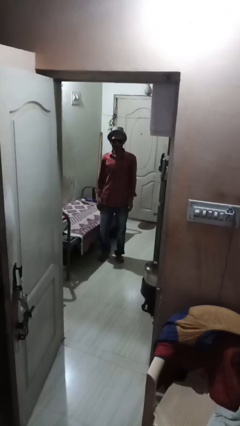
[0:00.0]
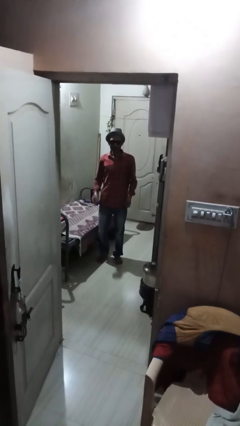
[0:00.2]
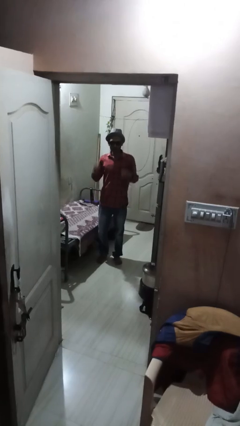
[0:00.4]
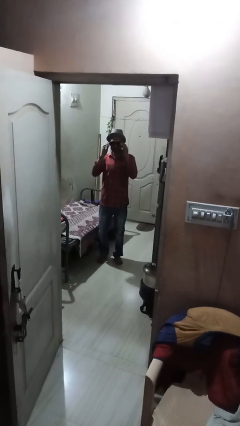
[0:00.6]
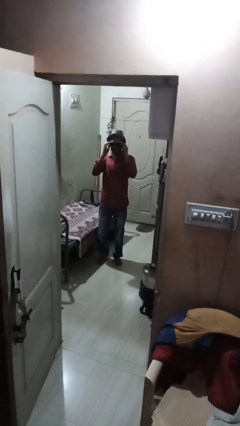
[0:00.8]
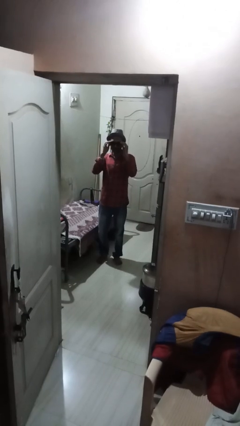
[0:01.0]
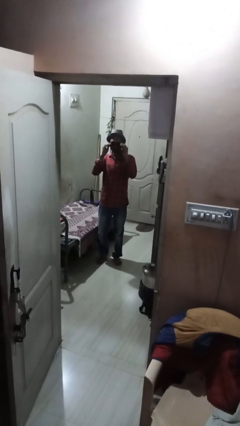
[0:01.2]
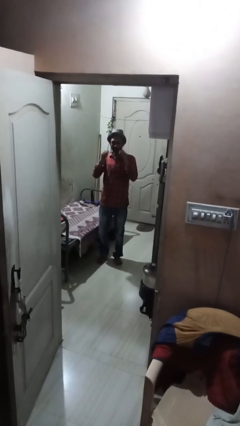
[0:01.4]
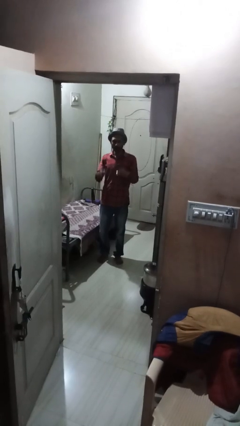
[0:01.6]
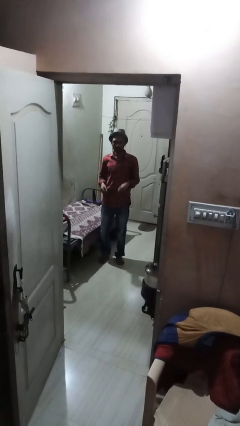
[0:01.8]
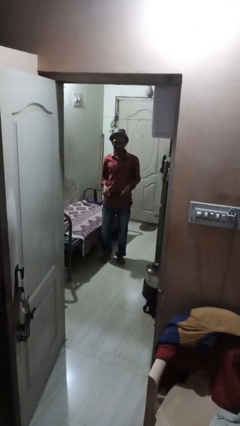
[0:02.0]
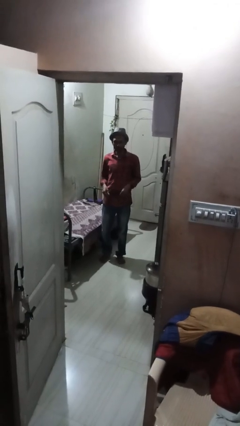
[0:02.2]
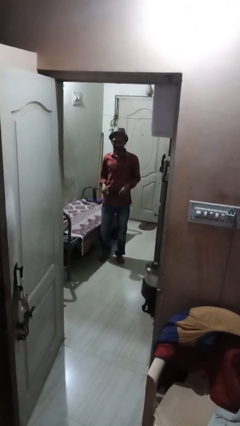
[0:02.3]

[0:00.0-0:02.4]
person takes off sunglasses

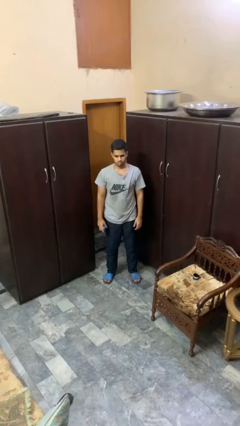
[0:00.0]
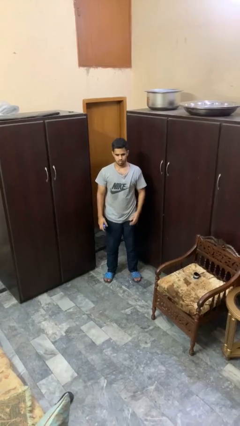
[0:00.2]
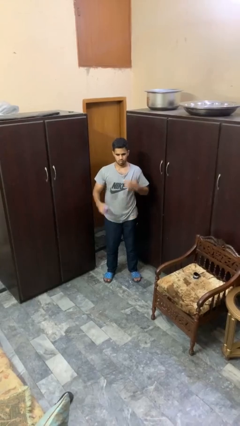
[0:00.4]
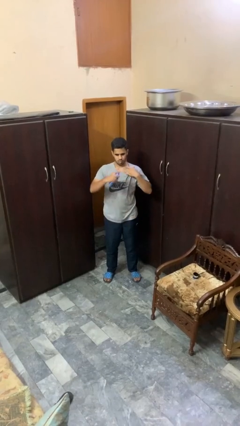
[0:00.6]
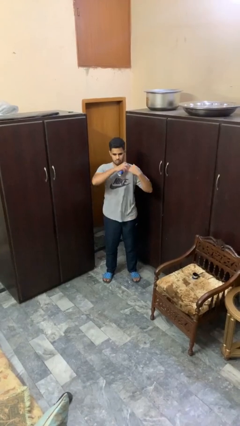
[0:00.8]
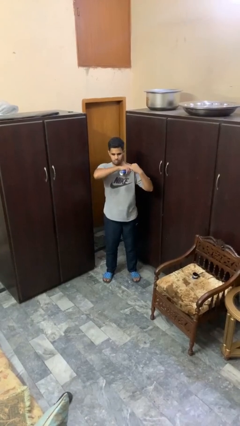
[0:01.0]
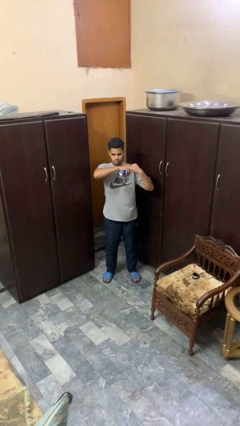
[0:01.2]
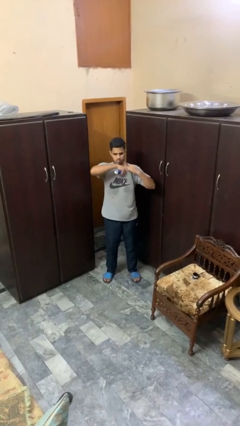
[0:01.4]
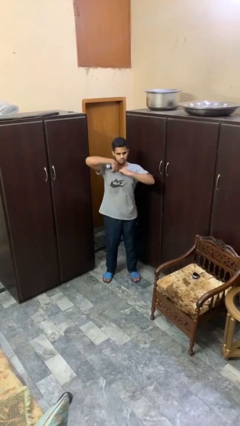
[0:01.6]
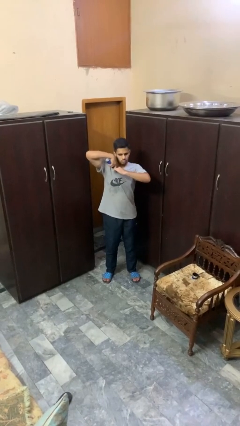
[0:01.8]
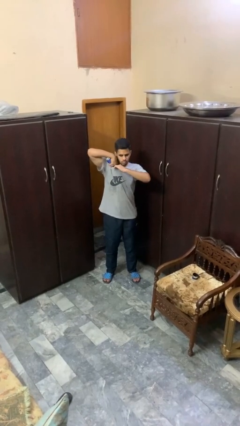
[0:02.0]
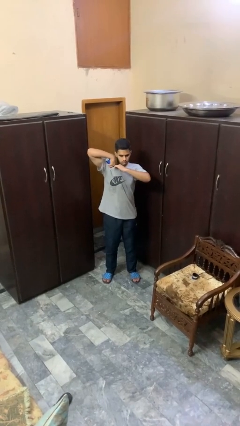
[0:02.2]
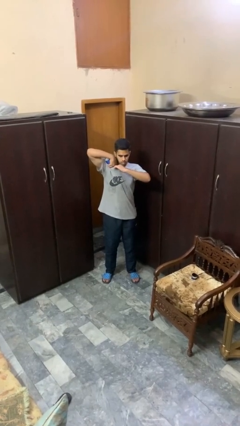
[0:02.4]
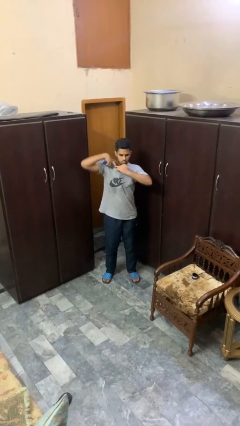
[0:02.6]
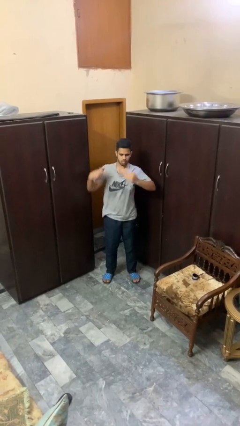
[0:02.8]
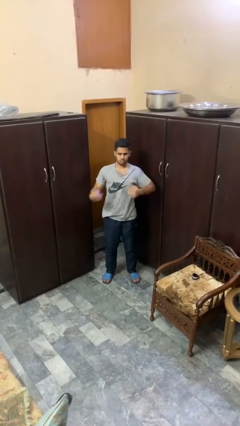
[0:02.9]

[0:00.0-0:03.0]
person applies deodorant

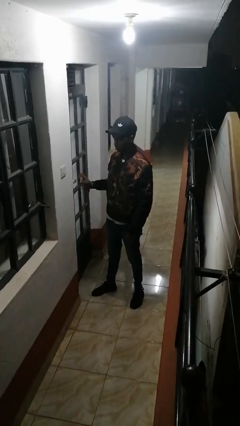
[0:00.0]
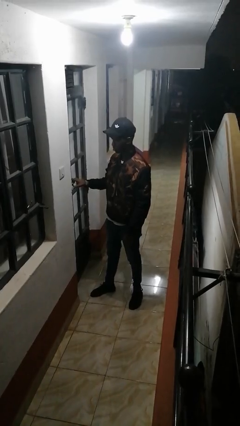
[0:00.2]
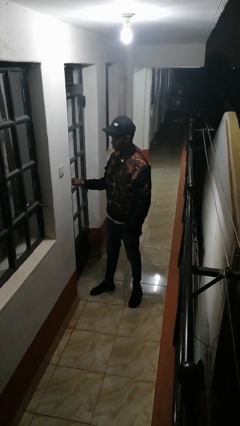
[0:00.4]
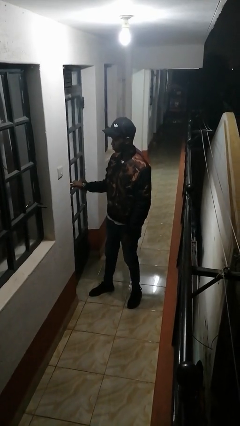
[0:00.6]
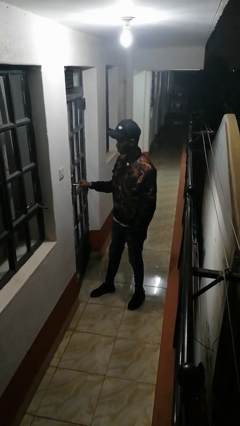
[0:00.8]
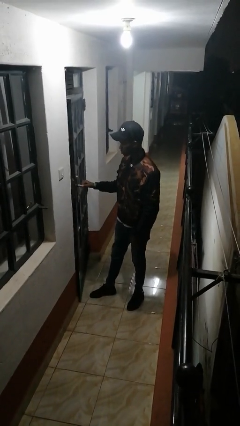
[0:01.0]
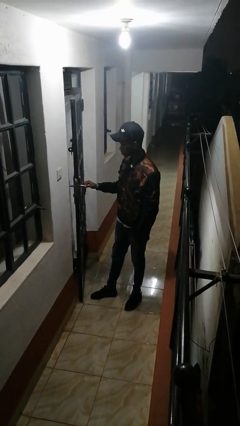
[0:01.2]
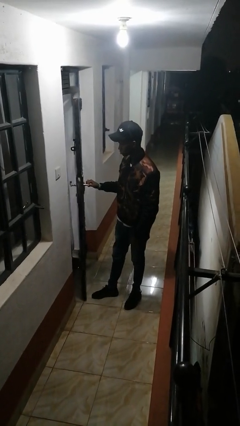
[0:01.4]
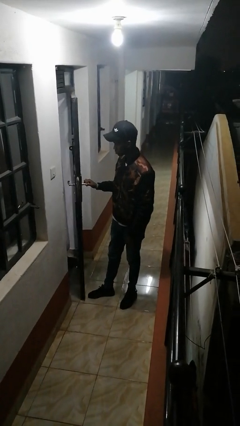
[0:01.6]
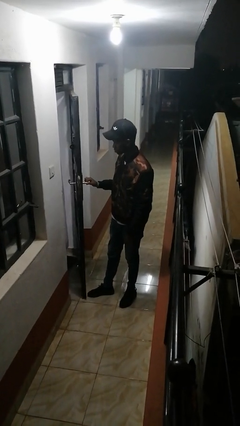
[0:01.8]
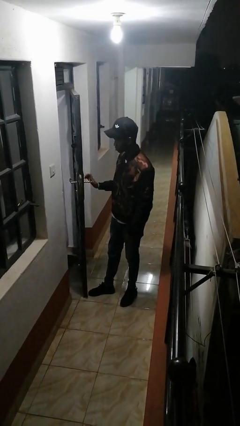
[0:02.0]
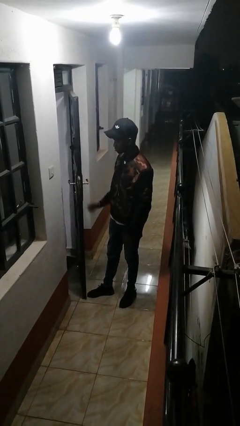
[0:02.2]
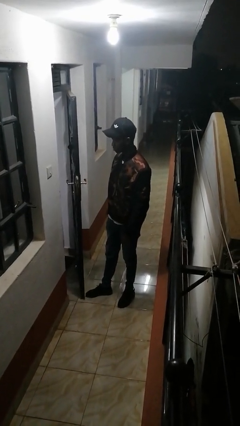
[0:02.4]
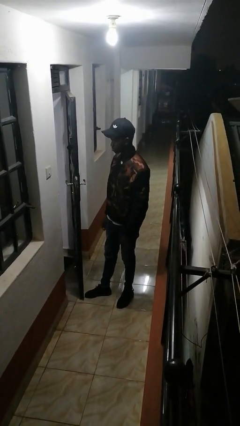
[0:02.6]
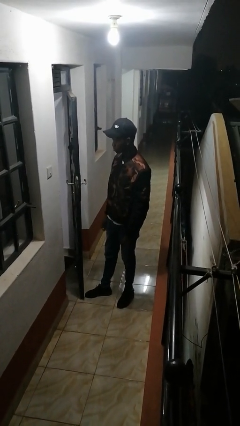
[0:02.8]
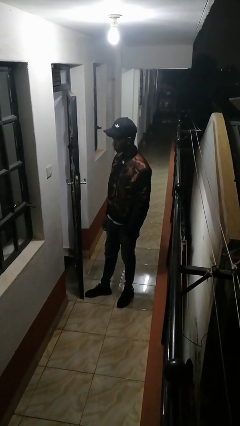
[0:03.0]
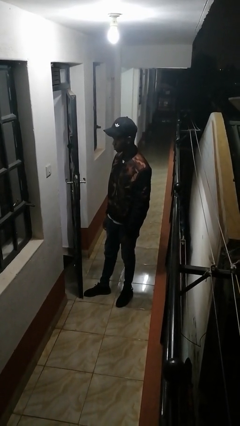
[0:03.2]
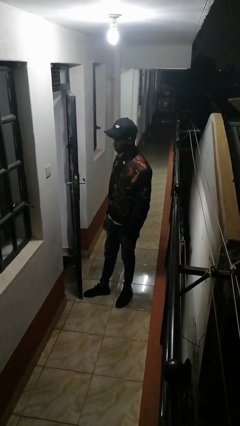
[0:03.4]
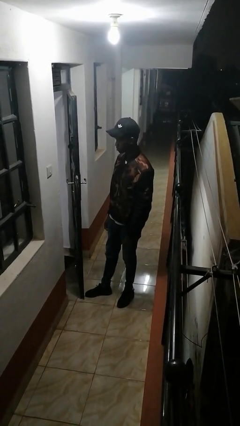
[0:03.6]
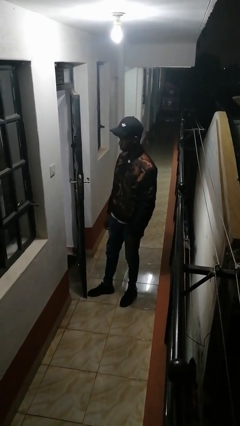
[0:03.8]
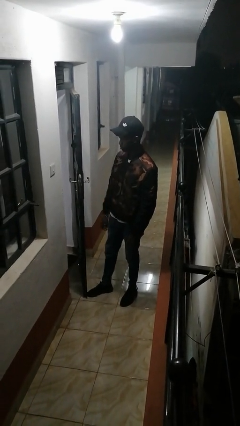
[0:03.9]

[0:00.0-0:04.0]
person opens facility door

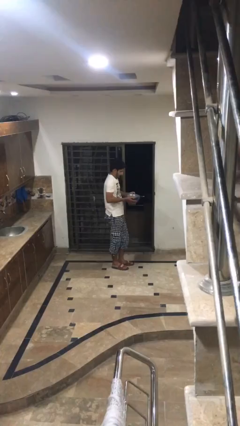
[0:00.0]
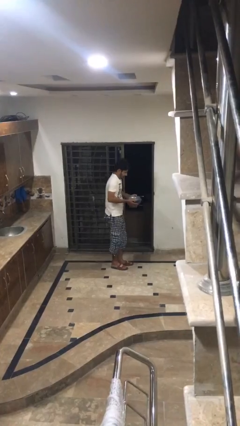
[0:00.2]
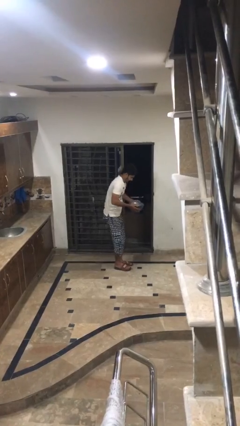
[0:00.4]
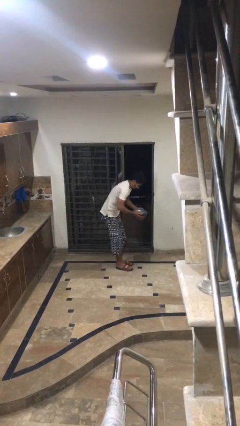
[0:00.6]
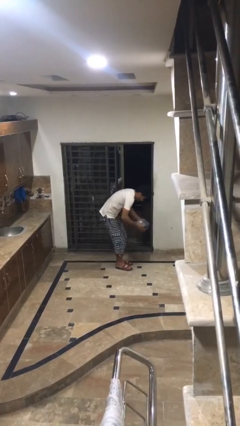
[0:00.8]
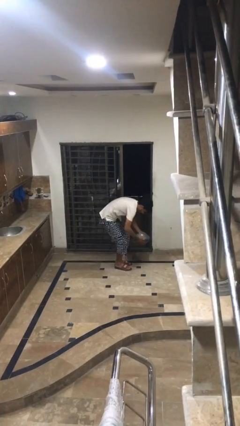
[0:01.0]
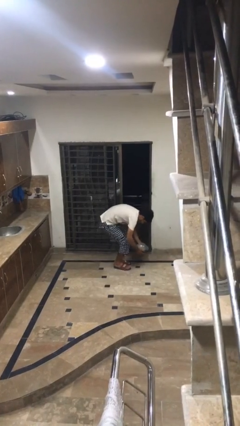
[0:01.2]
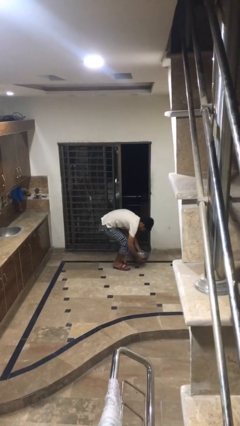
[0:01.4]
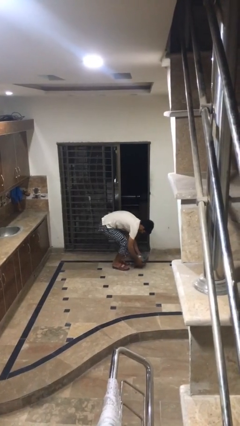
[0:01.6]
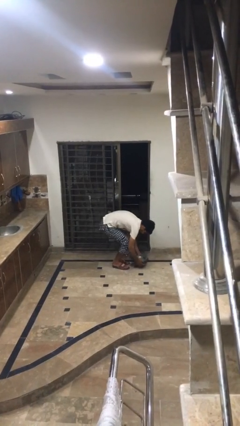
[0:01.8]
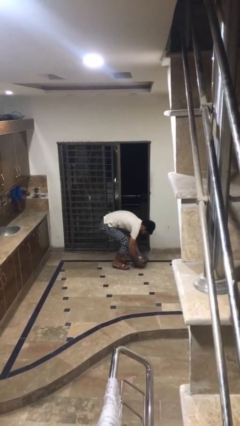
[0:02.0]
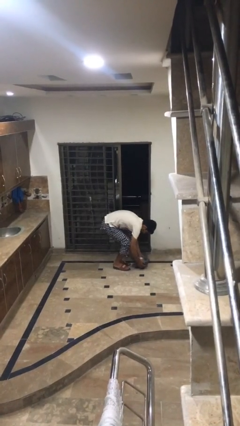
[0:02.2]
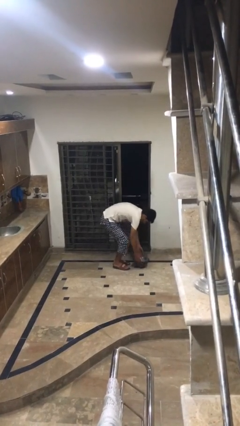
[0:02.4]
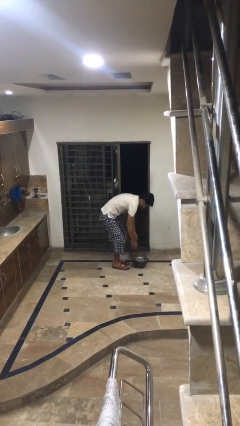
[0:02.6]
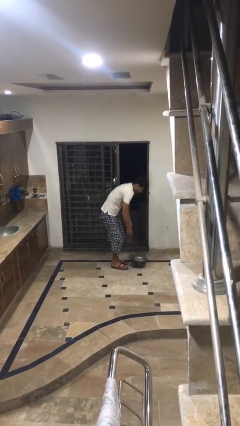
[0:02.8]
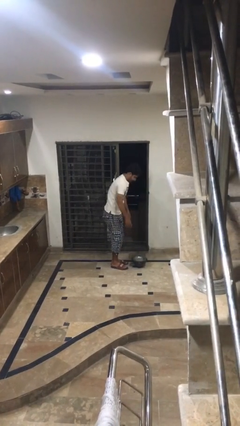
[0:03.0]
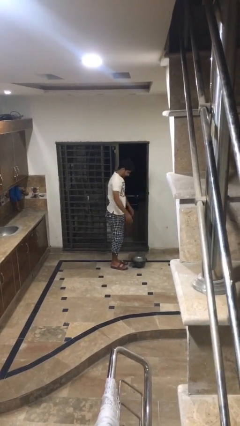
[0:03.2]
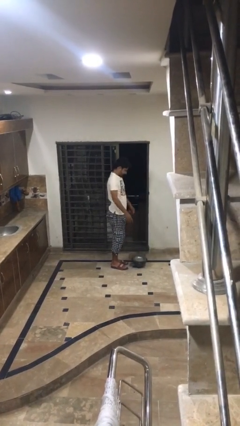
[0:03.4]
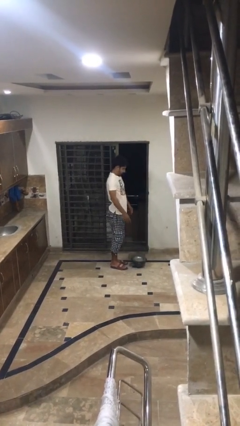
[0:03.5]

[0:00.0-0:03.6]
person puts down object on floor

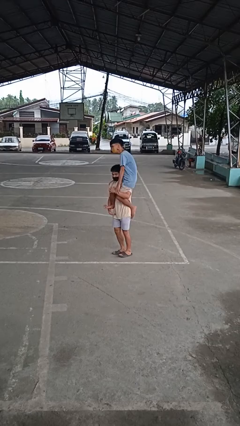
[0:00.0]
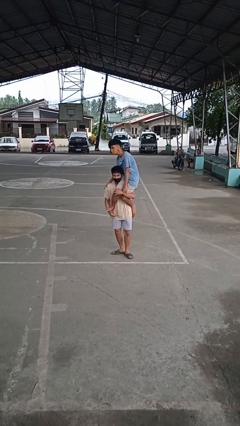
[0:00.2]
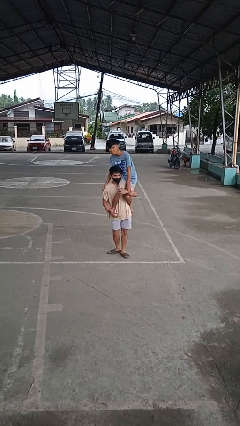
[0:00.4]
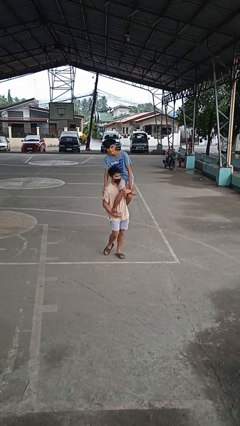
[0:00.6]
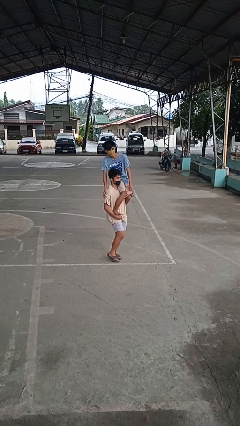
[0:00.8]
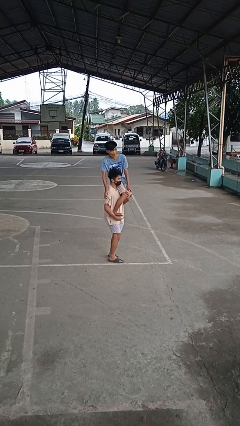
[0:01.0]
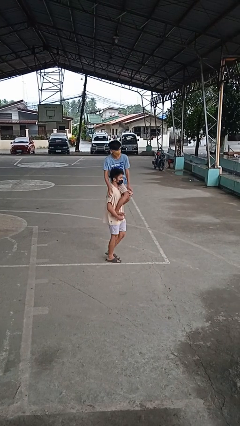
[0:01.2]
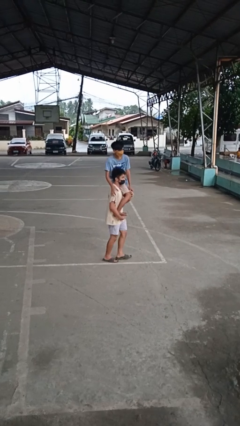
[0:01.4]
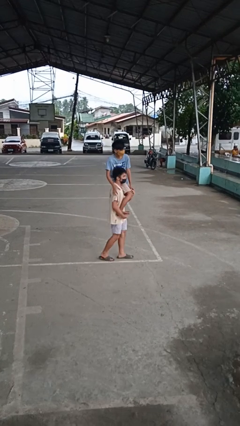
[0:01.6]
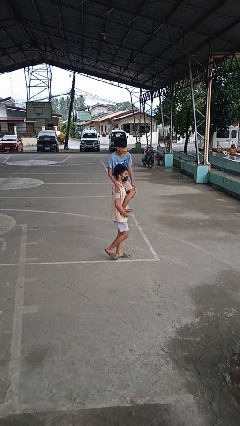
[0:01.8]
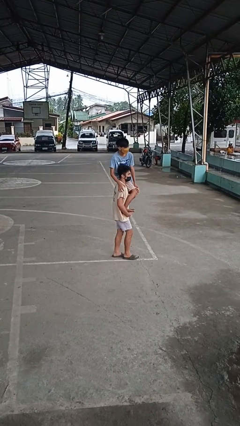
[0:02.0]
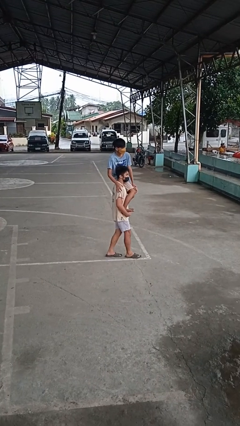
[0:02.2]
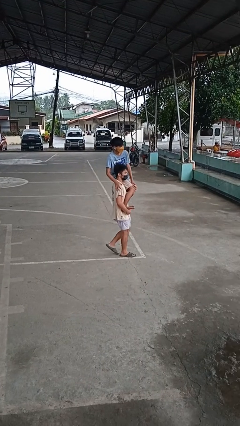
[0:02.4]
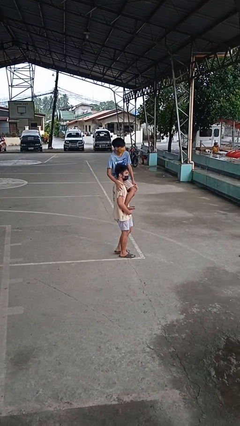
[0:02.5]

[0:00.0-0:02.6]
person carries person on shoulders

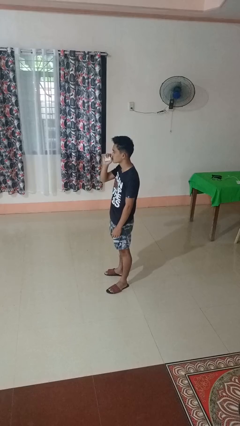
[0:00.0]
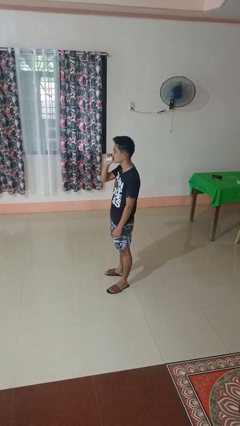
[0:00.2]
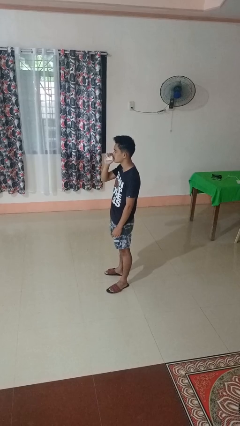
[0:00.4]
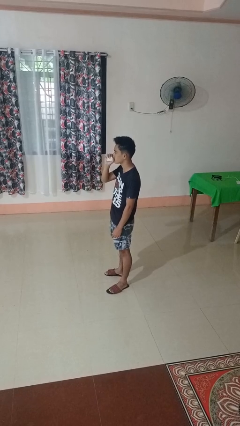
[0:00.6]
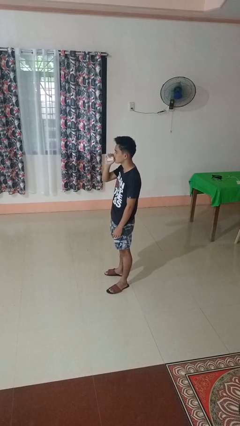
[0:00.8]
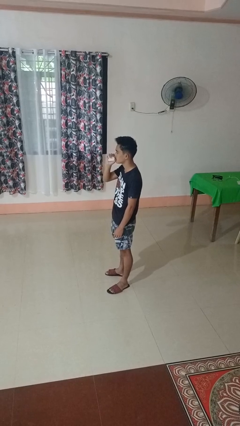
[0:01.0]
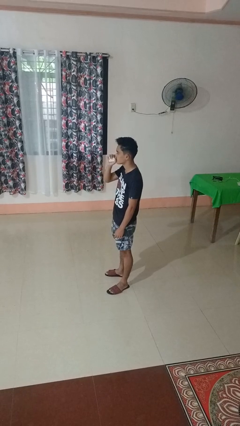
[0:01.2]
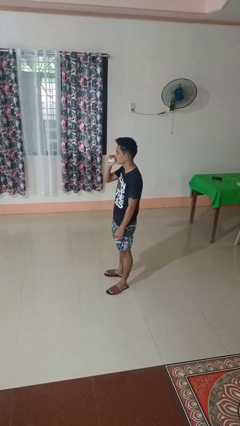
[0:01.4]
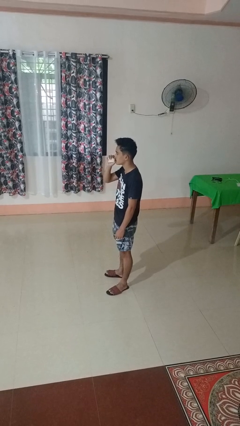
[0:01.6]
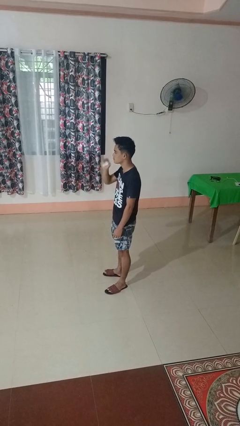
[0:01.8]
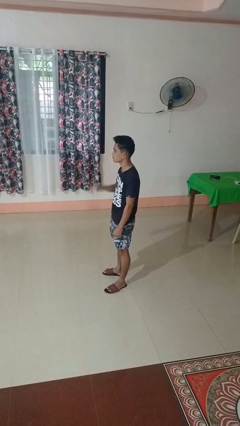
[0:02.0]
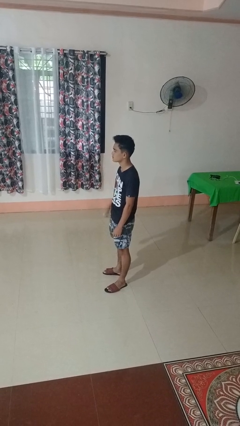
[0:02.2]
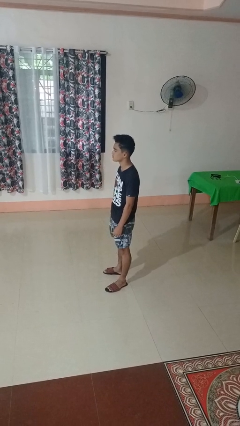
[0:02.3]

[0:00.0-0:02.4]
person vapes
